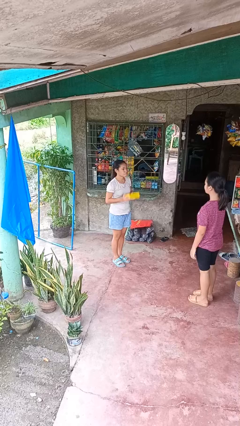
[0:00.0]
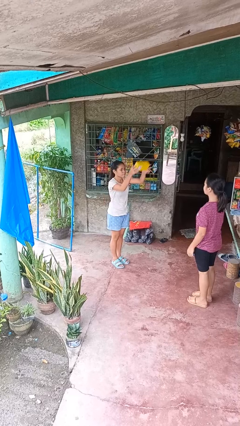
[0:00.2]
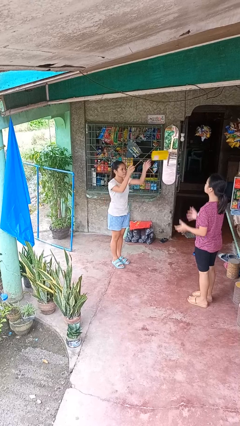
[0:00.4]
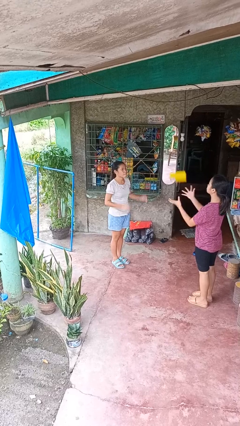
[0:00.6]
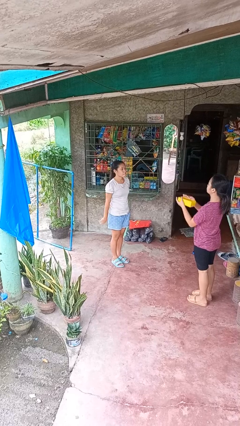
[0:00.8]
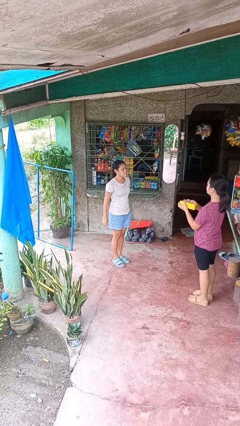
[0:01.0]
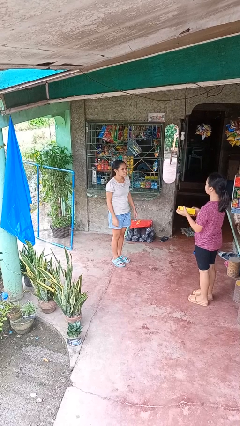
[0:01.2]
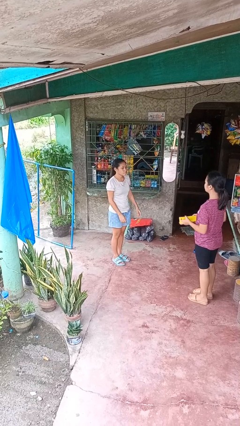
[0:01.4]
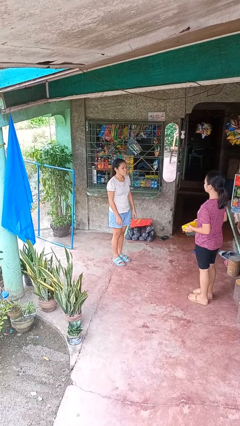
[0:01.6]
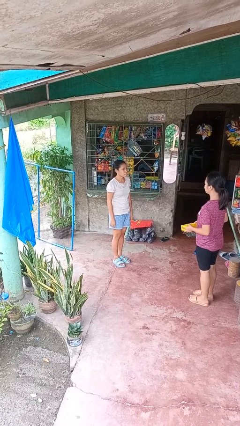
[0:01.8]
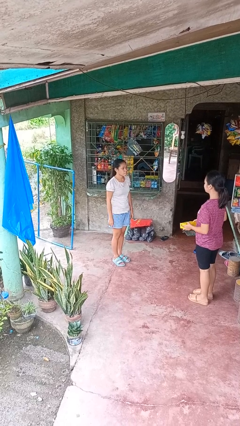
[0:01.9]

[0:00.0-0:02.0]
person throws object to person

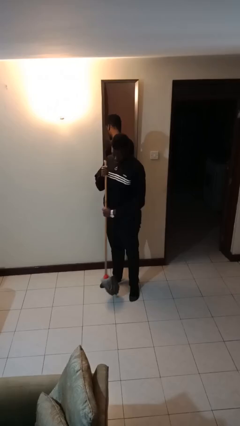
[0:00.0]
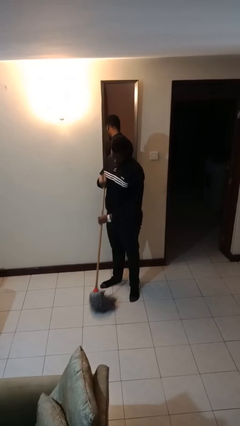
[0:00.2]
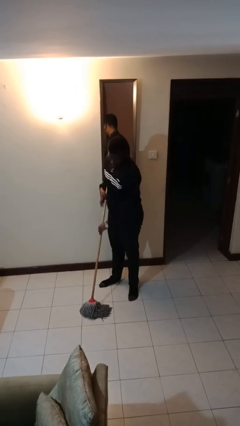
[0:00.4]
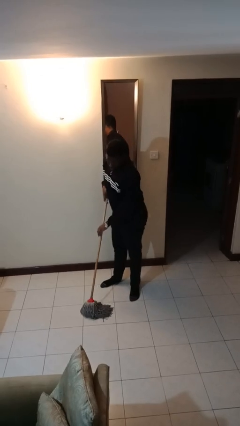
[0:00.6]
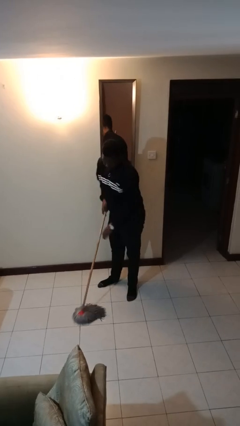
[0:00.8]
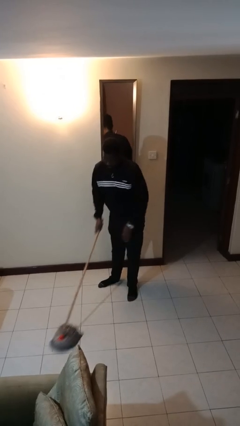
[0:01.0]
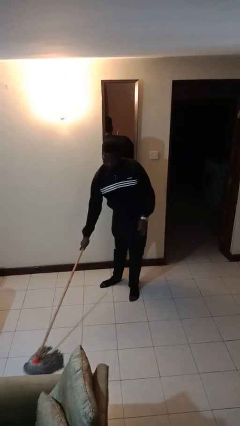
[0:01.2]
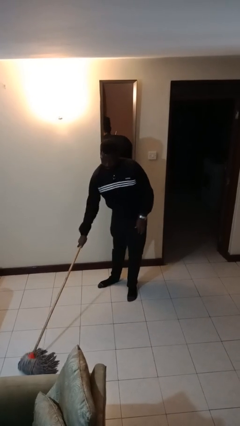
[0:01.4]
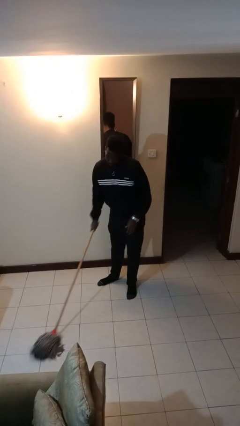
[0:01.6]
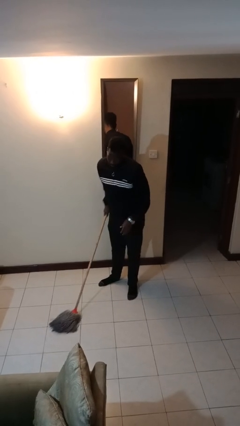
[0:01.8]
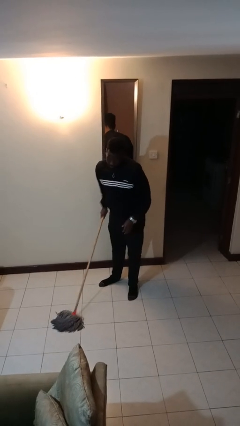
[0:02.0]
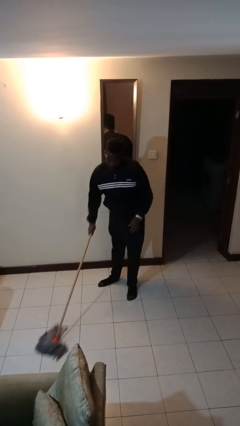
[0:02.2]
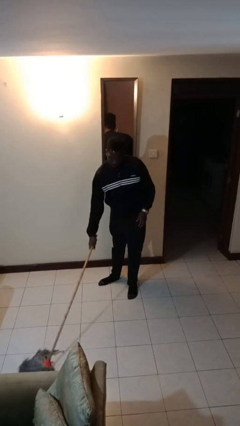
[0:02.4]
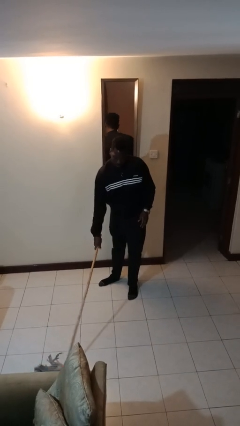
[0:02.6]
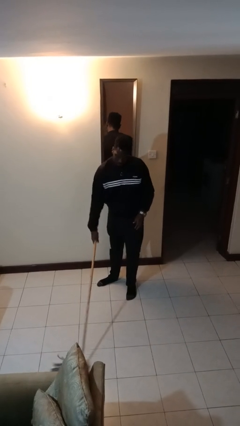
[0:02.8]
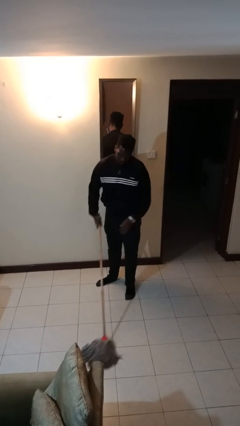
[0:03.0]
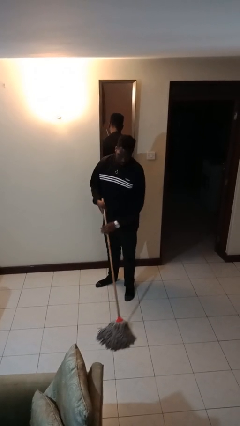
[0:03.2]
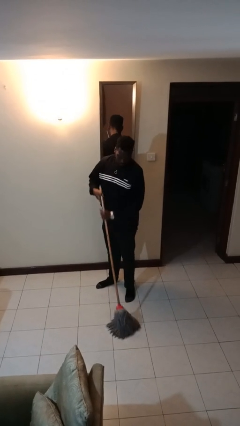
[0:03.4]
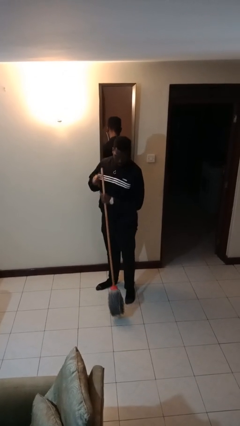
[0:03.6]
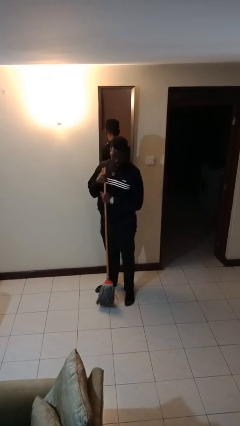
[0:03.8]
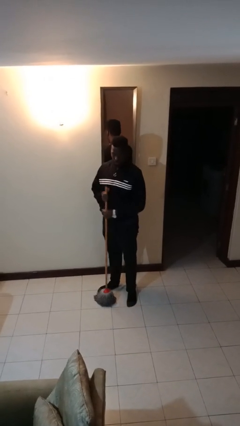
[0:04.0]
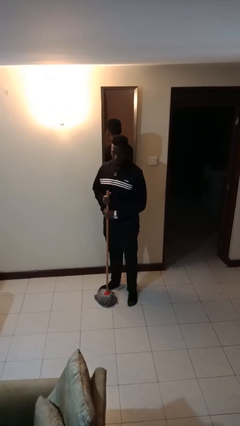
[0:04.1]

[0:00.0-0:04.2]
person mops

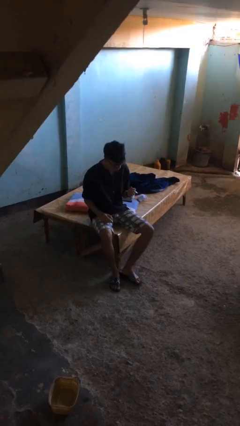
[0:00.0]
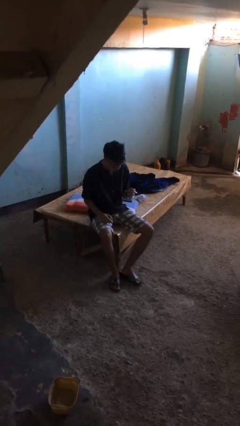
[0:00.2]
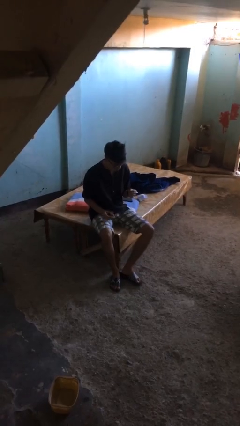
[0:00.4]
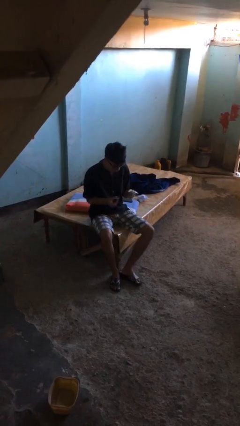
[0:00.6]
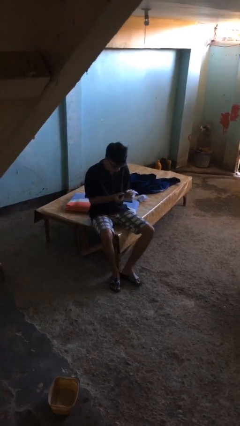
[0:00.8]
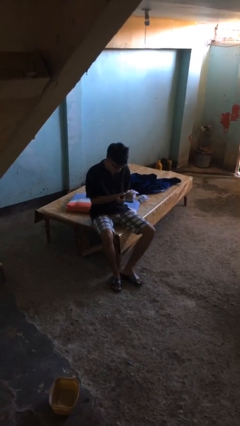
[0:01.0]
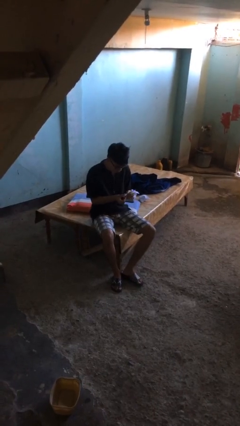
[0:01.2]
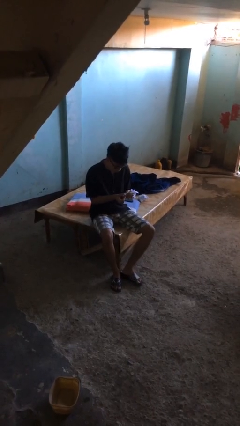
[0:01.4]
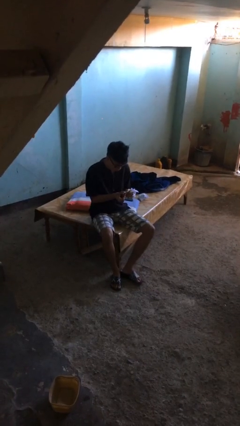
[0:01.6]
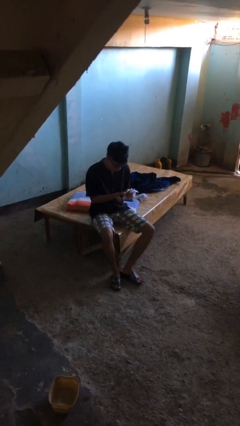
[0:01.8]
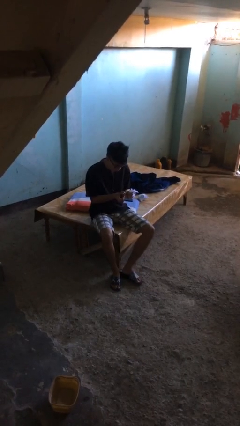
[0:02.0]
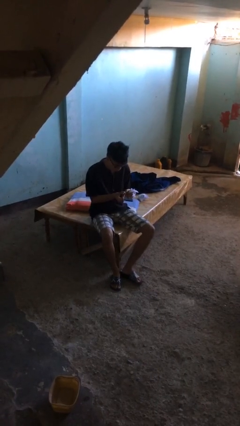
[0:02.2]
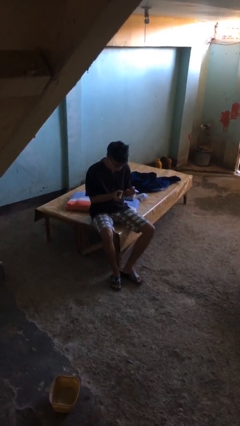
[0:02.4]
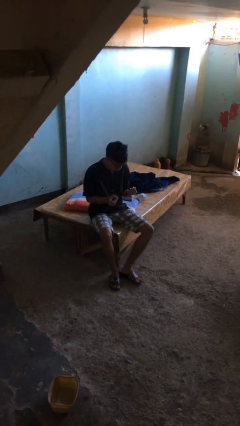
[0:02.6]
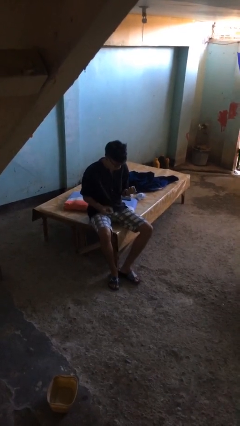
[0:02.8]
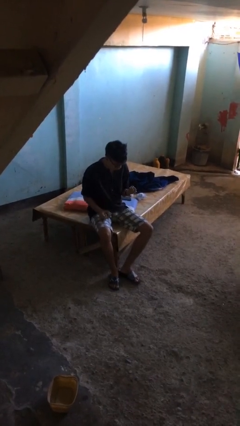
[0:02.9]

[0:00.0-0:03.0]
person clips fingernails

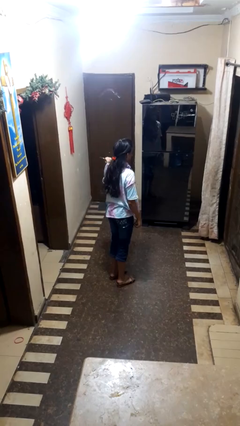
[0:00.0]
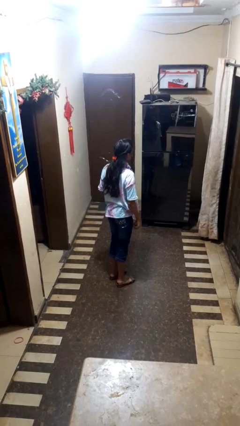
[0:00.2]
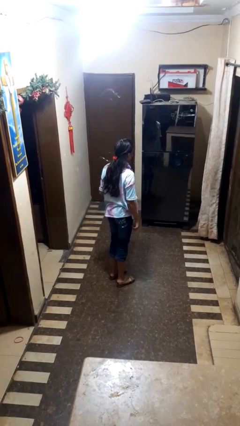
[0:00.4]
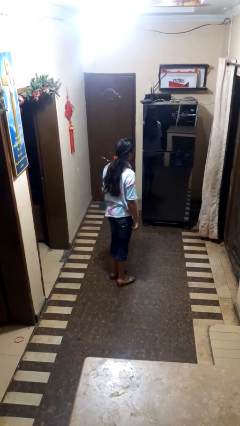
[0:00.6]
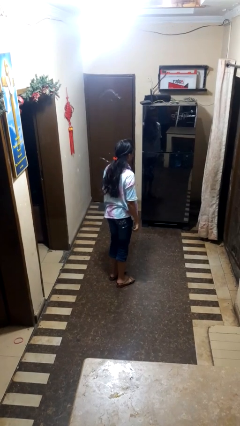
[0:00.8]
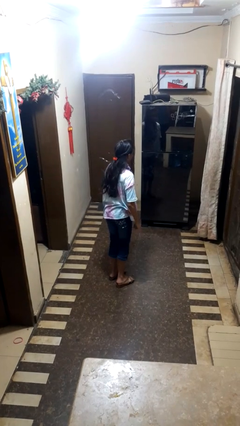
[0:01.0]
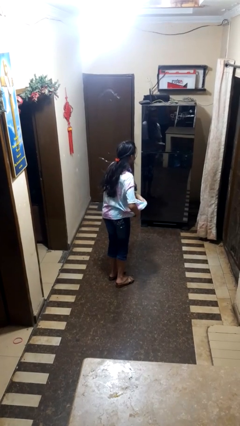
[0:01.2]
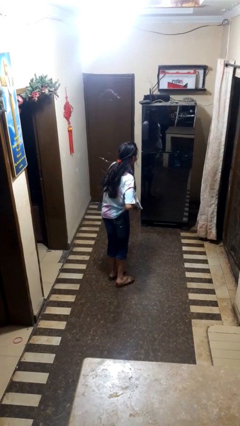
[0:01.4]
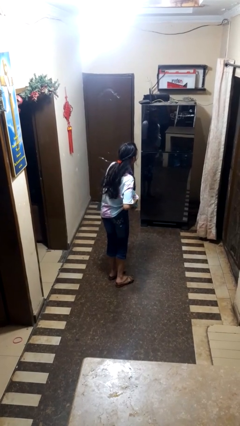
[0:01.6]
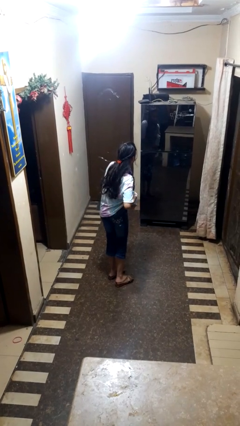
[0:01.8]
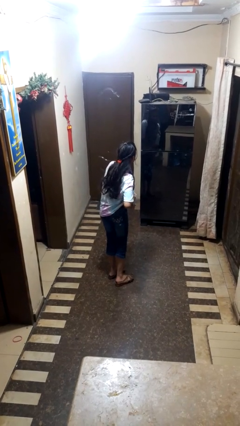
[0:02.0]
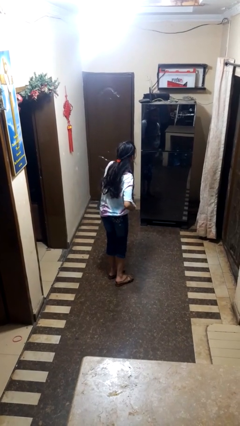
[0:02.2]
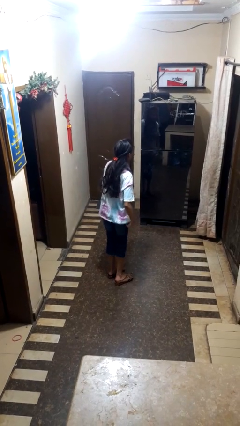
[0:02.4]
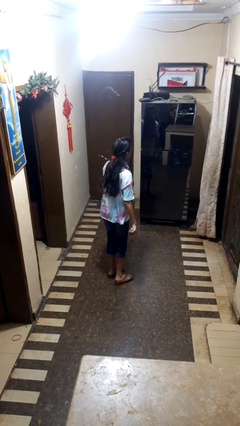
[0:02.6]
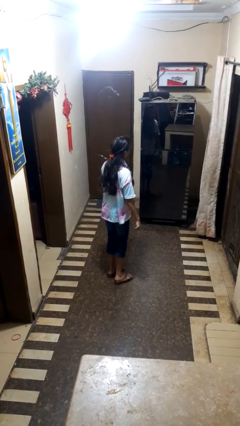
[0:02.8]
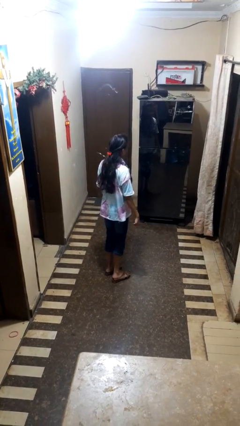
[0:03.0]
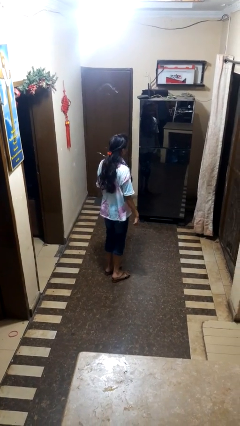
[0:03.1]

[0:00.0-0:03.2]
person applies deodorant

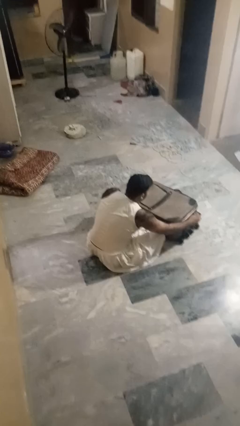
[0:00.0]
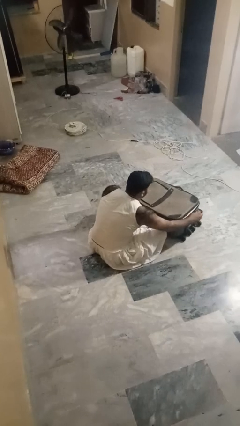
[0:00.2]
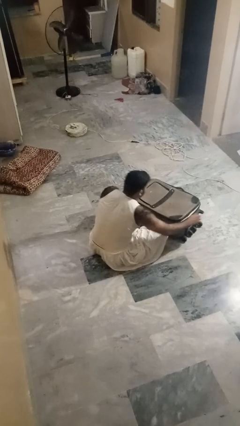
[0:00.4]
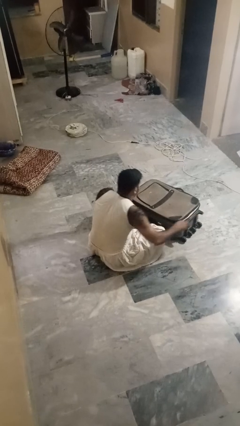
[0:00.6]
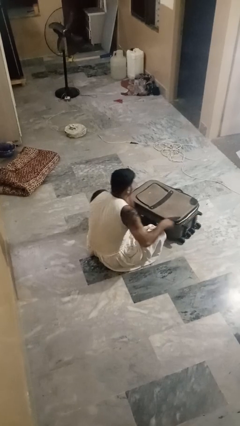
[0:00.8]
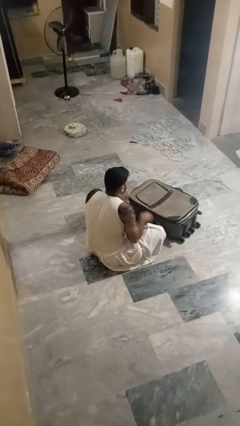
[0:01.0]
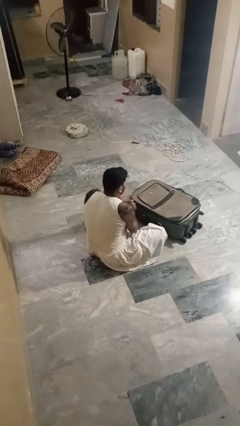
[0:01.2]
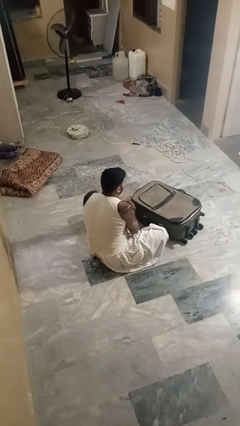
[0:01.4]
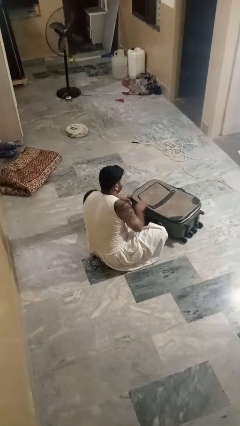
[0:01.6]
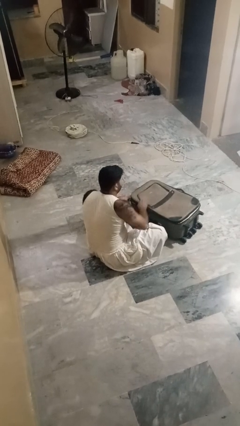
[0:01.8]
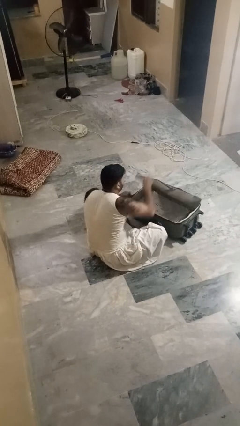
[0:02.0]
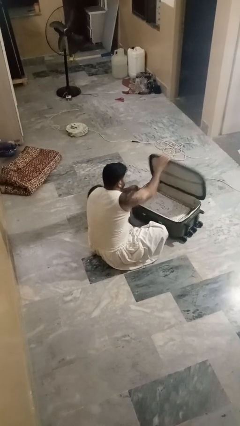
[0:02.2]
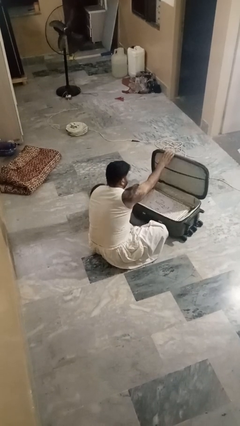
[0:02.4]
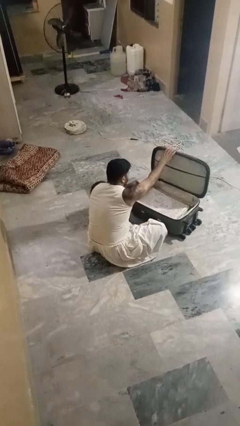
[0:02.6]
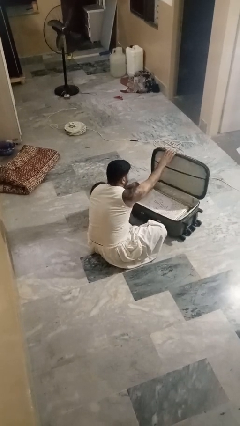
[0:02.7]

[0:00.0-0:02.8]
person opens suitcase

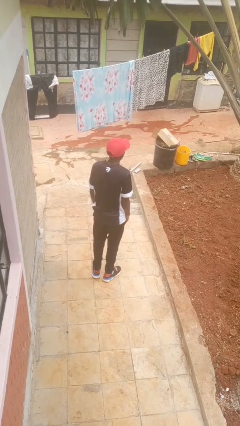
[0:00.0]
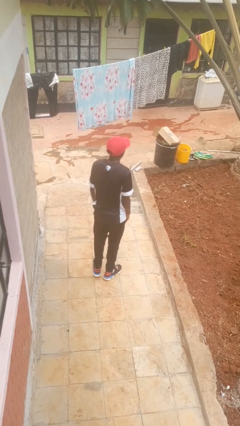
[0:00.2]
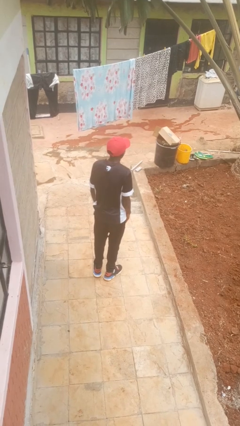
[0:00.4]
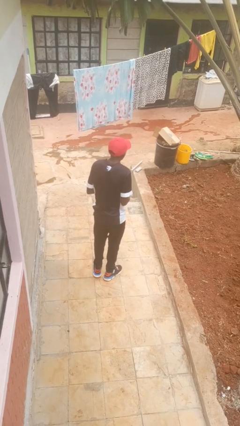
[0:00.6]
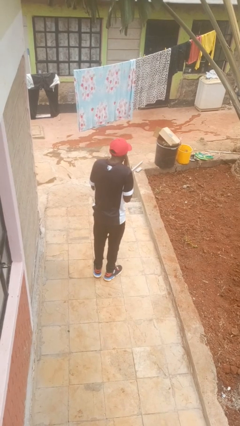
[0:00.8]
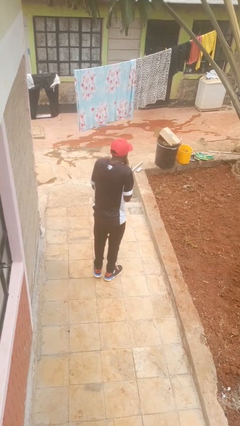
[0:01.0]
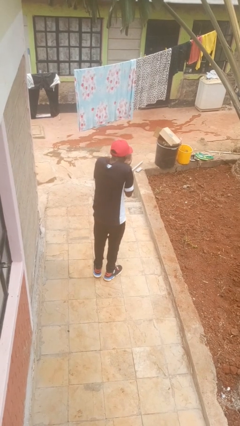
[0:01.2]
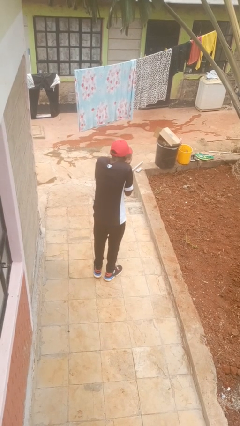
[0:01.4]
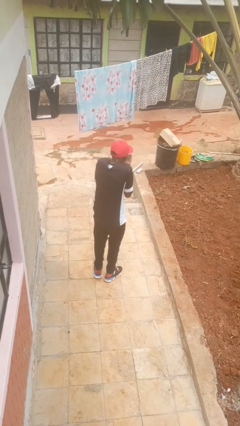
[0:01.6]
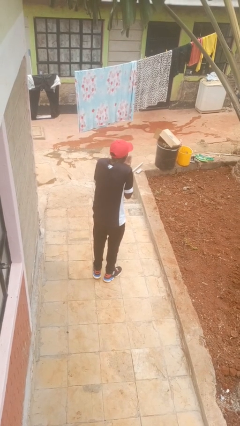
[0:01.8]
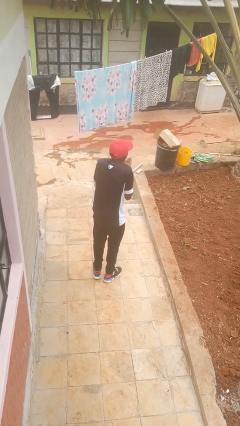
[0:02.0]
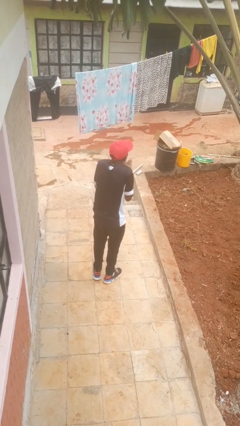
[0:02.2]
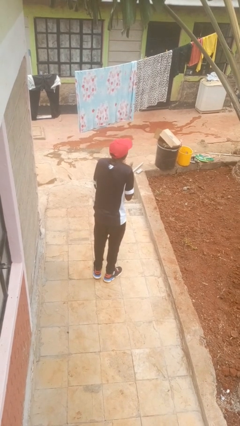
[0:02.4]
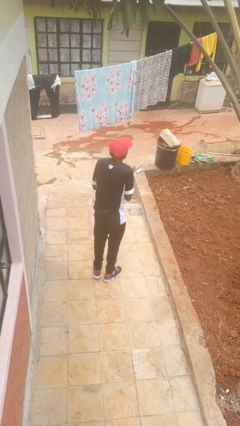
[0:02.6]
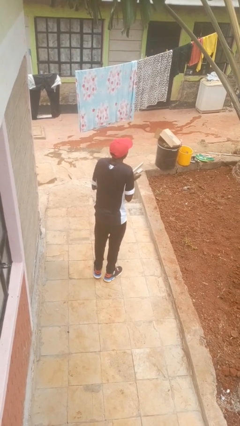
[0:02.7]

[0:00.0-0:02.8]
person gestures blow kiss
